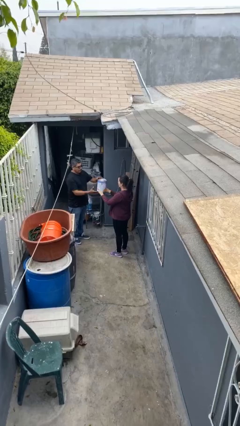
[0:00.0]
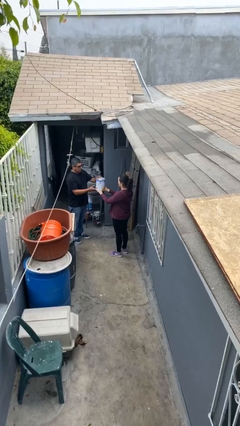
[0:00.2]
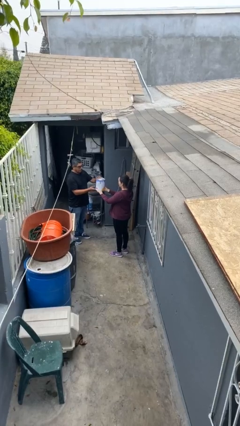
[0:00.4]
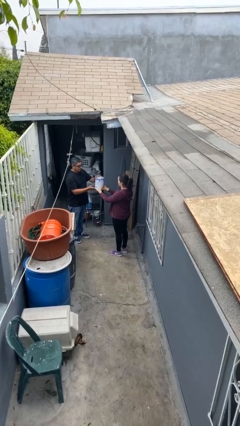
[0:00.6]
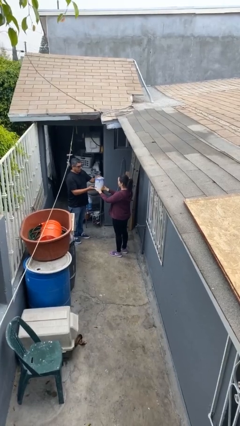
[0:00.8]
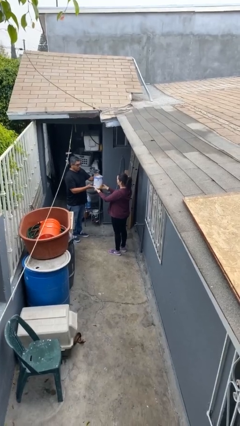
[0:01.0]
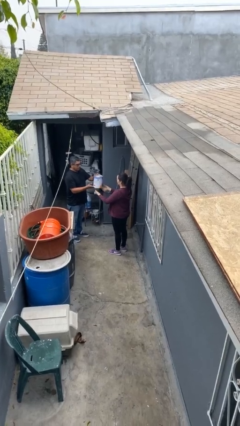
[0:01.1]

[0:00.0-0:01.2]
person transfers object to person

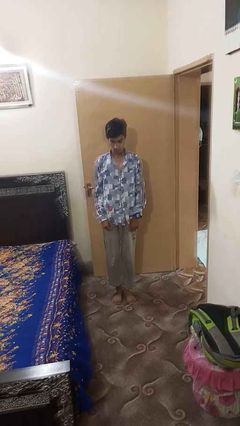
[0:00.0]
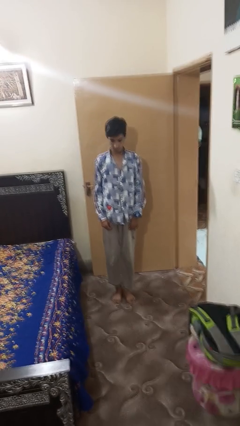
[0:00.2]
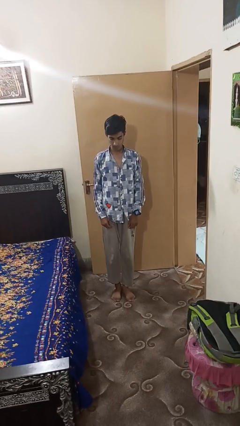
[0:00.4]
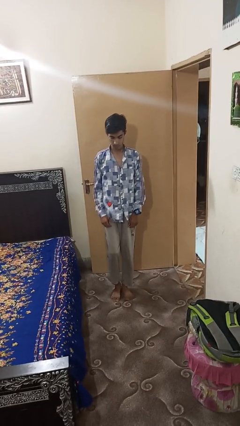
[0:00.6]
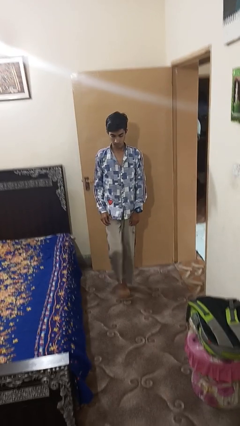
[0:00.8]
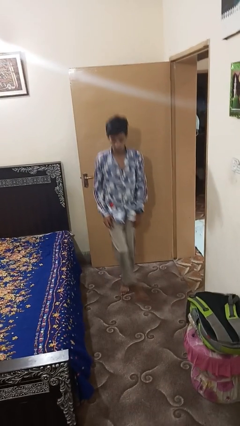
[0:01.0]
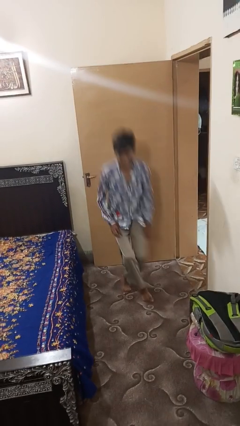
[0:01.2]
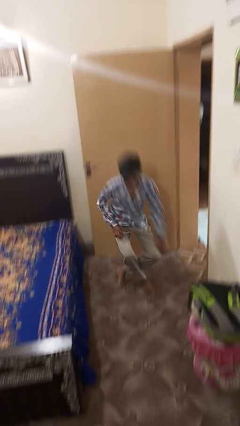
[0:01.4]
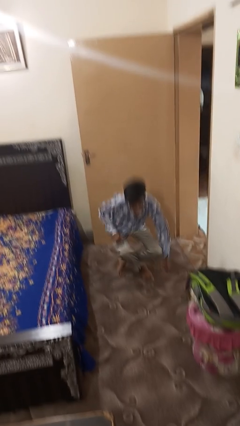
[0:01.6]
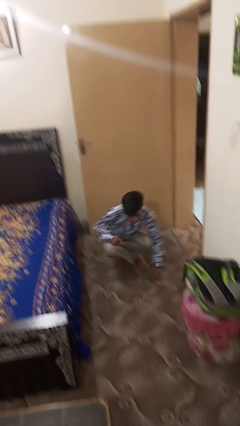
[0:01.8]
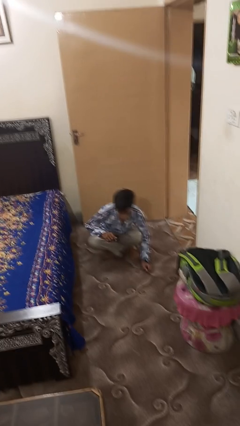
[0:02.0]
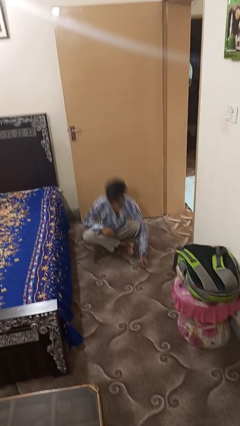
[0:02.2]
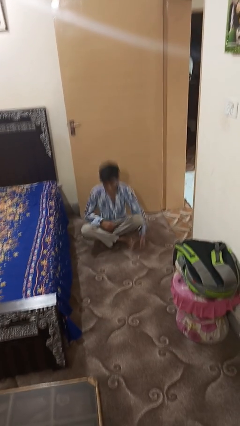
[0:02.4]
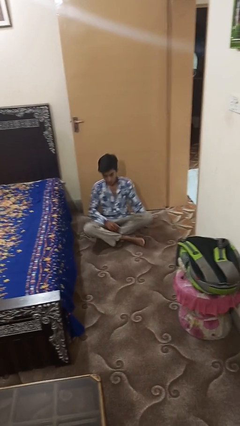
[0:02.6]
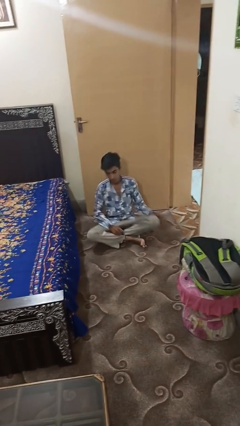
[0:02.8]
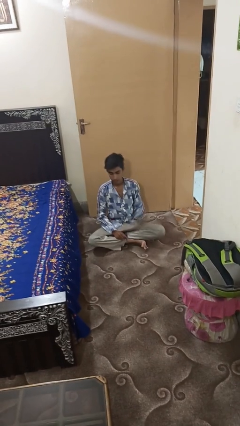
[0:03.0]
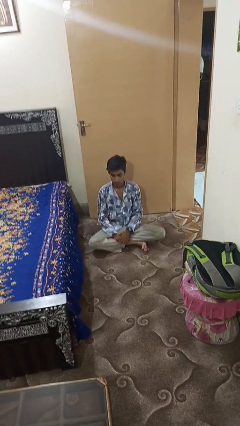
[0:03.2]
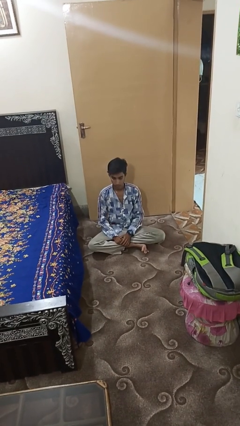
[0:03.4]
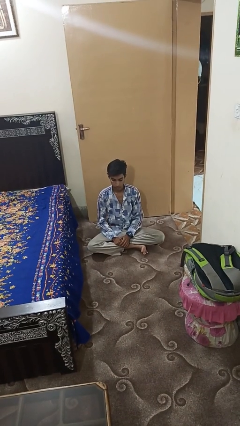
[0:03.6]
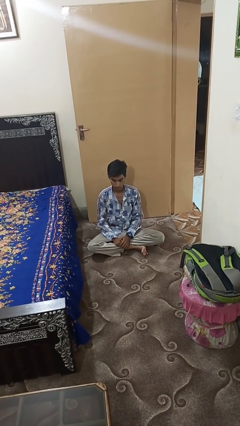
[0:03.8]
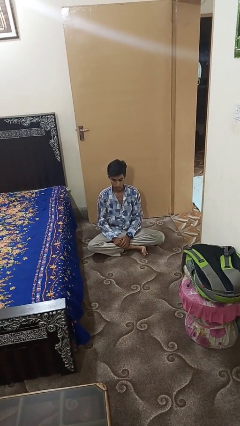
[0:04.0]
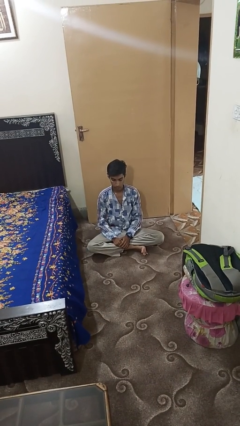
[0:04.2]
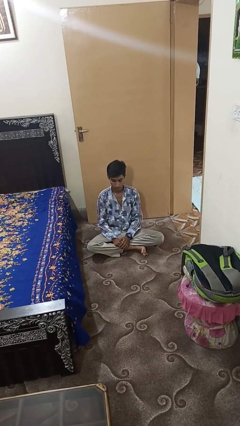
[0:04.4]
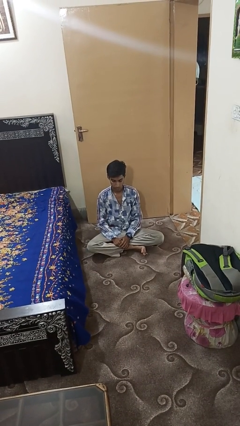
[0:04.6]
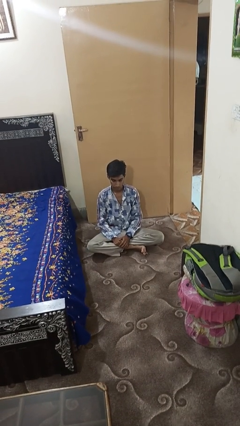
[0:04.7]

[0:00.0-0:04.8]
person sits crisscross

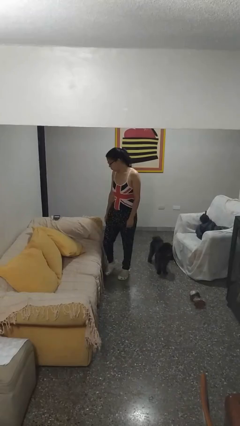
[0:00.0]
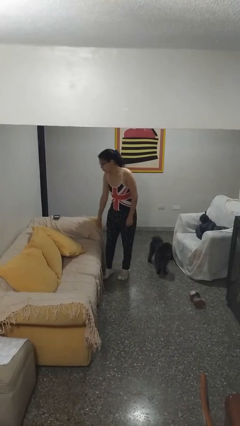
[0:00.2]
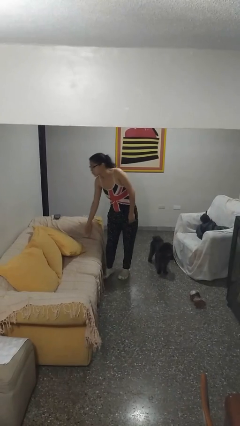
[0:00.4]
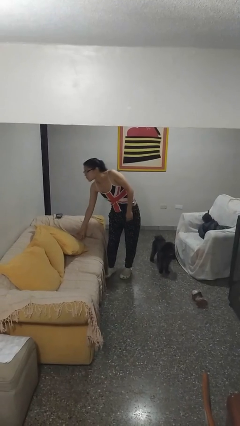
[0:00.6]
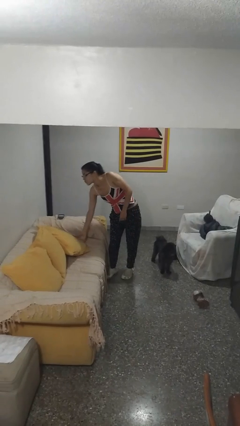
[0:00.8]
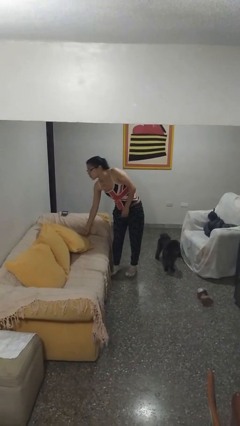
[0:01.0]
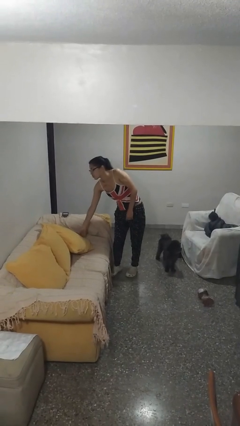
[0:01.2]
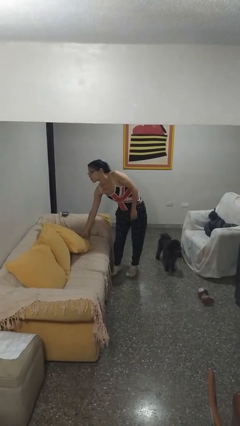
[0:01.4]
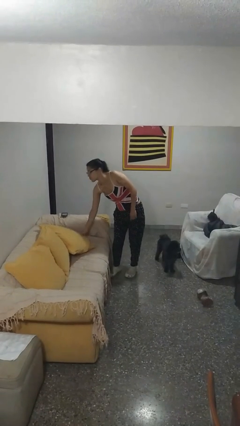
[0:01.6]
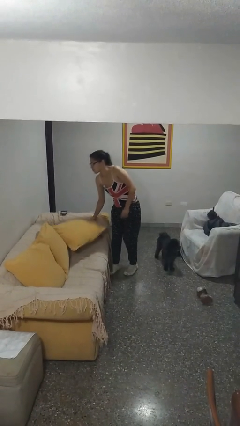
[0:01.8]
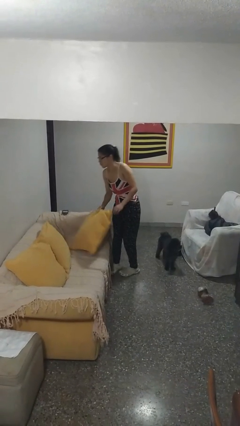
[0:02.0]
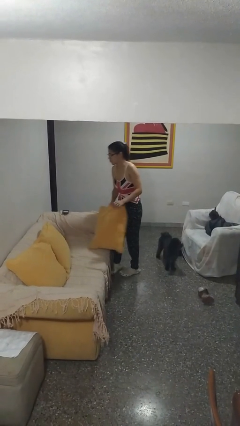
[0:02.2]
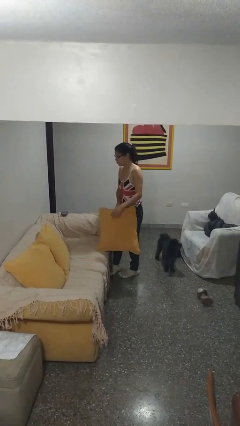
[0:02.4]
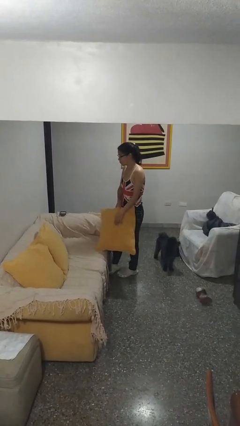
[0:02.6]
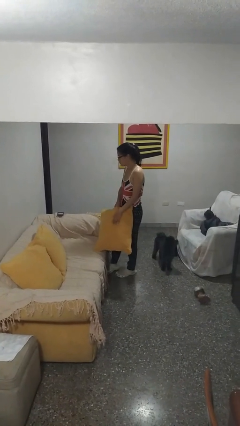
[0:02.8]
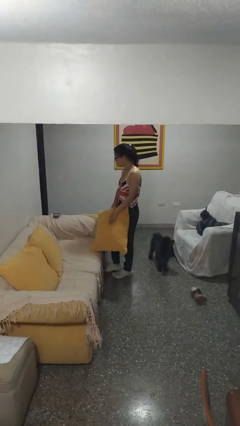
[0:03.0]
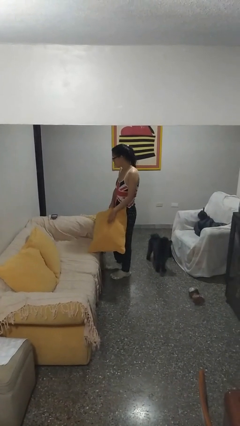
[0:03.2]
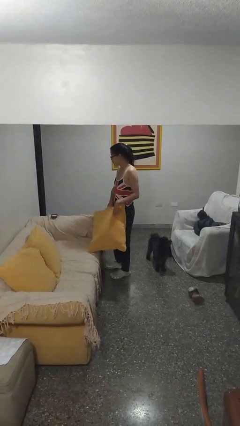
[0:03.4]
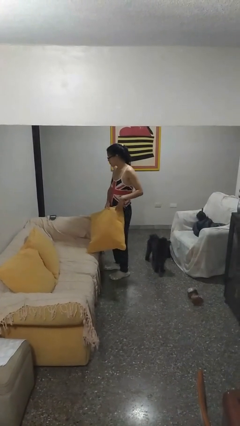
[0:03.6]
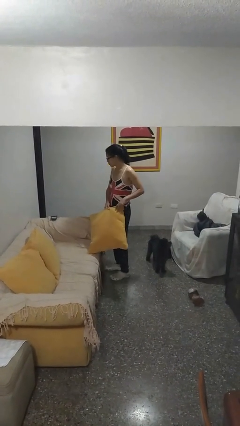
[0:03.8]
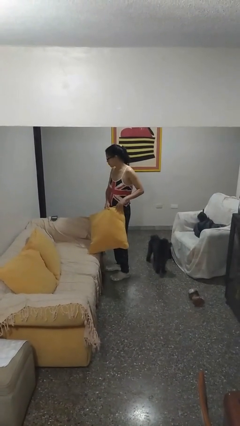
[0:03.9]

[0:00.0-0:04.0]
person picks up object from couch

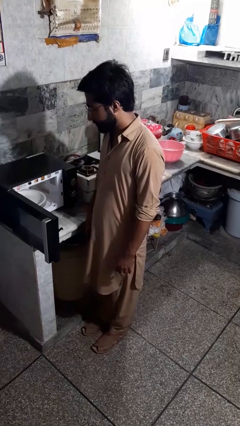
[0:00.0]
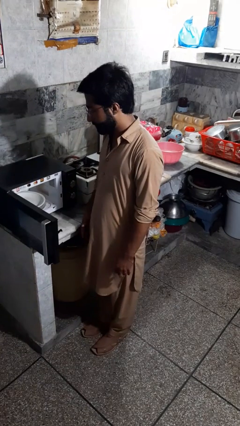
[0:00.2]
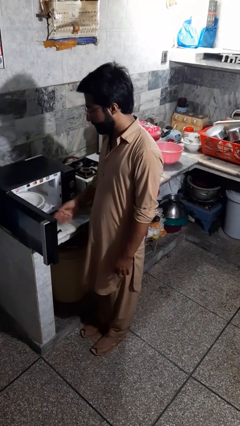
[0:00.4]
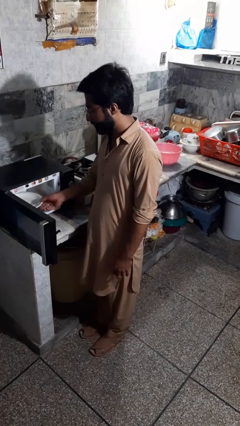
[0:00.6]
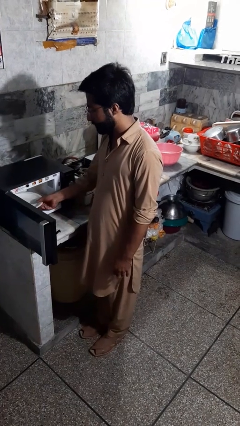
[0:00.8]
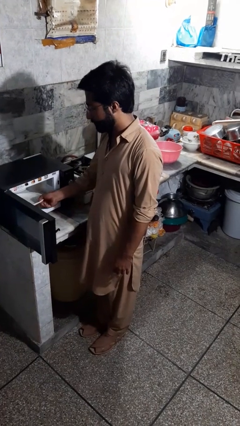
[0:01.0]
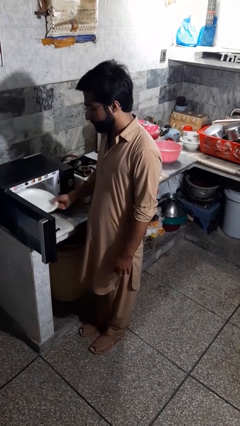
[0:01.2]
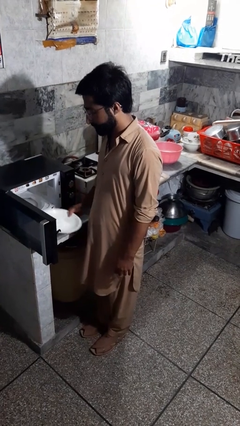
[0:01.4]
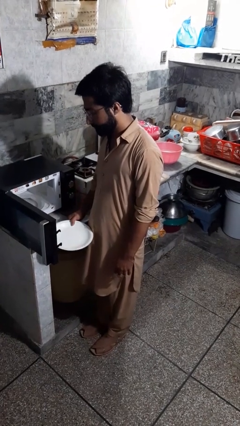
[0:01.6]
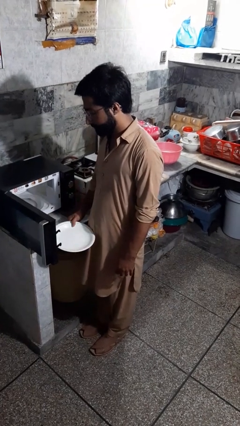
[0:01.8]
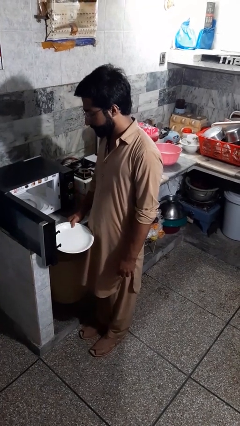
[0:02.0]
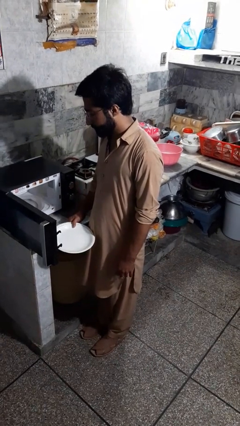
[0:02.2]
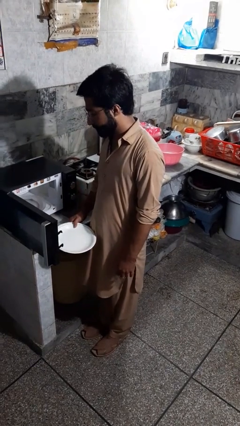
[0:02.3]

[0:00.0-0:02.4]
person takes object from oven

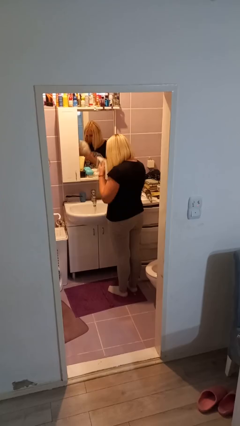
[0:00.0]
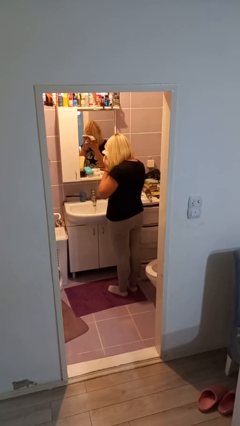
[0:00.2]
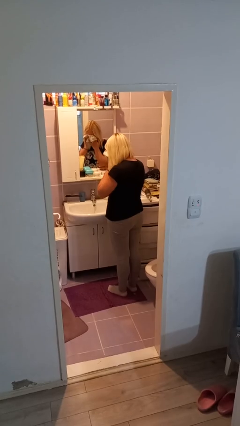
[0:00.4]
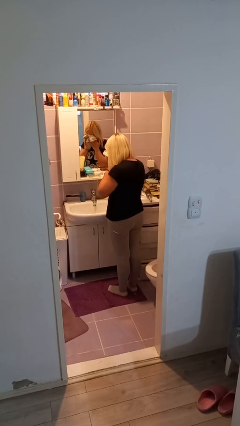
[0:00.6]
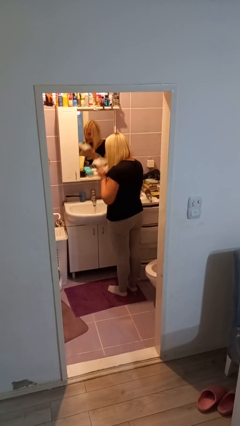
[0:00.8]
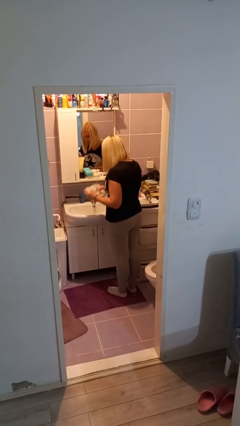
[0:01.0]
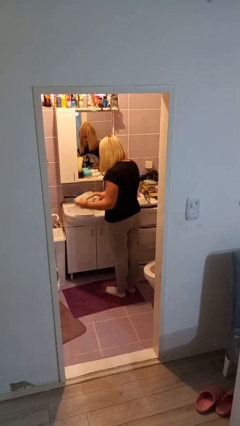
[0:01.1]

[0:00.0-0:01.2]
person dries face with towel

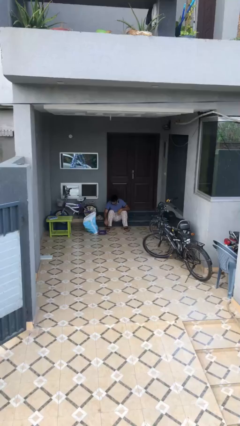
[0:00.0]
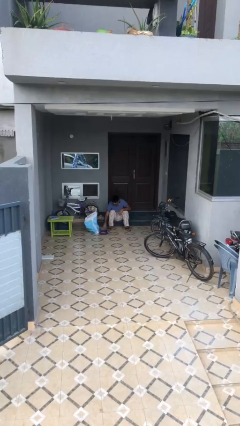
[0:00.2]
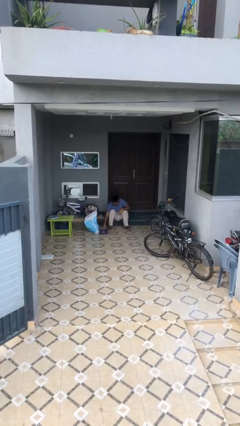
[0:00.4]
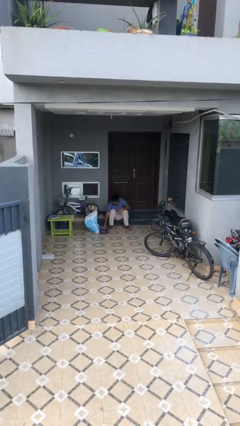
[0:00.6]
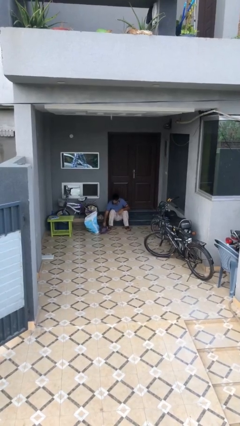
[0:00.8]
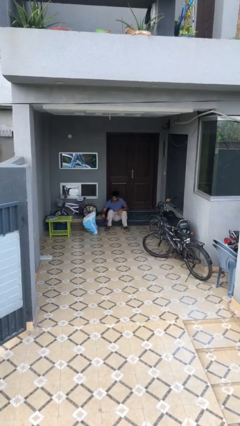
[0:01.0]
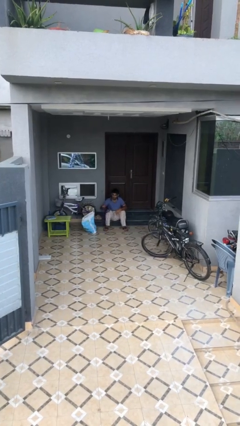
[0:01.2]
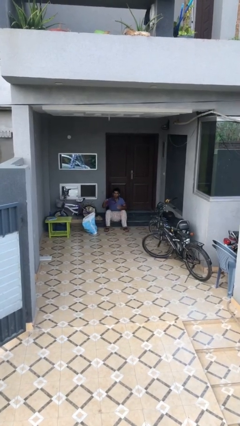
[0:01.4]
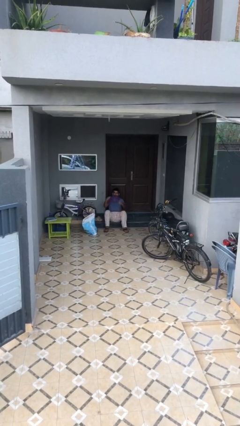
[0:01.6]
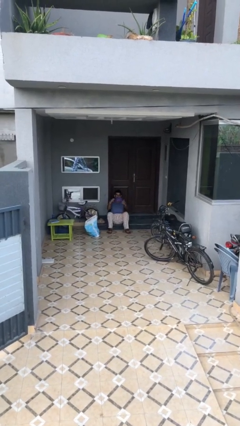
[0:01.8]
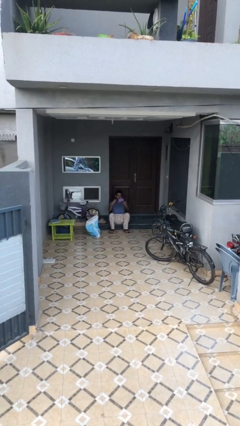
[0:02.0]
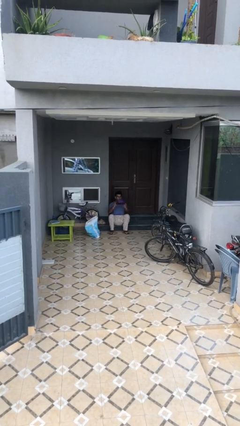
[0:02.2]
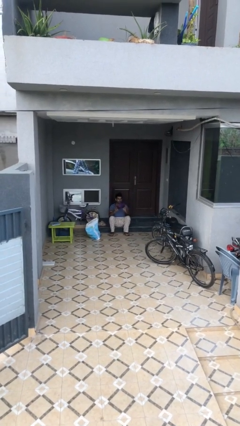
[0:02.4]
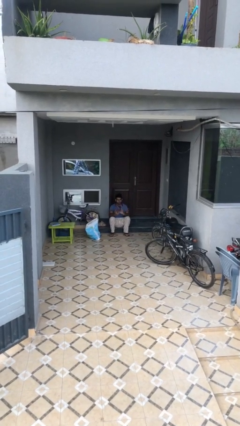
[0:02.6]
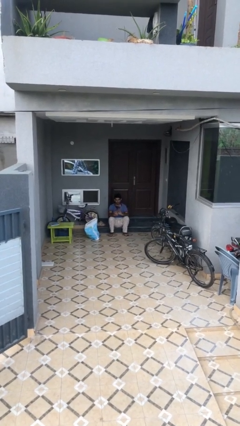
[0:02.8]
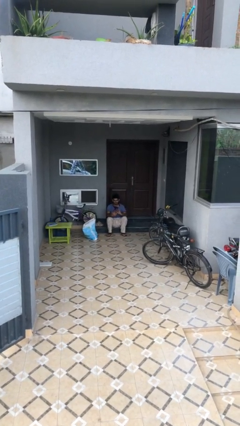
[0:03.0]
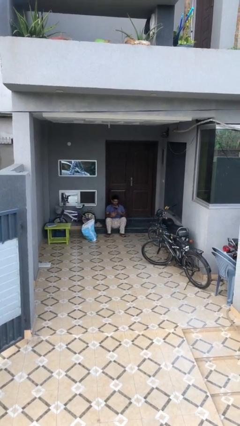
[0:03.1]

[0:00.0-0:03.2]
person picks up object from floor

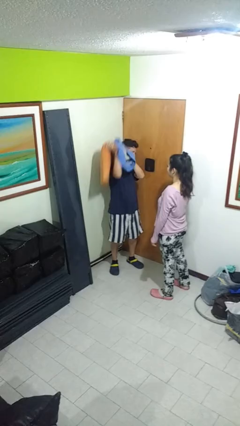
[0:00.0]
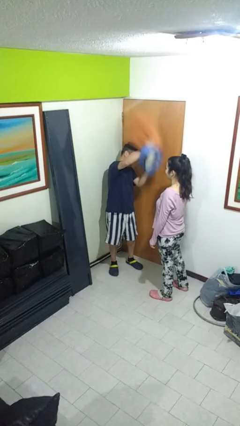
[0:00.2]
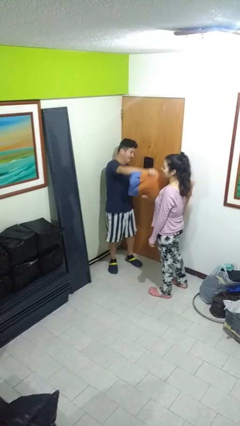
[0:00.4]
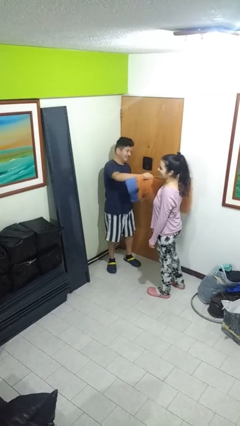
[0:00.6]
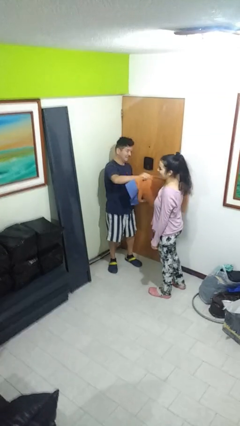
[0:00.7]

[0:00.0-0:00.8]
person hits person with pillow
